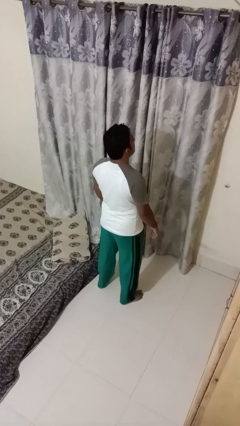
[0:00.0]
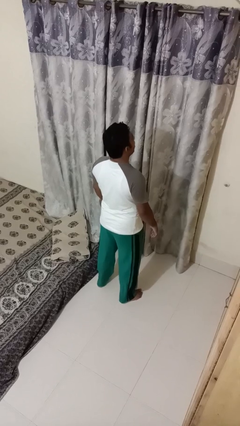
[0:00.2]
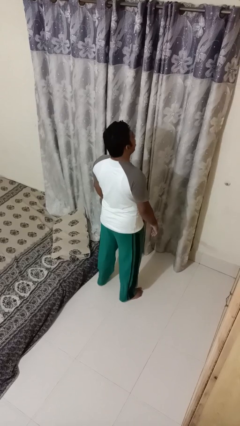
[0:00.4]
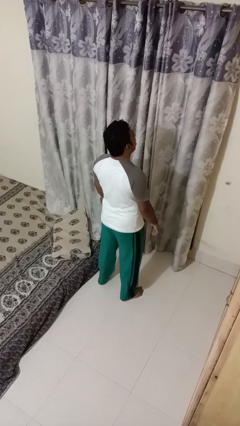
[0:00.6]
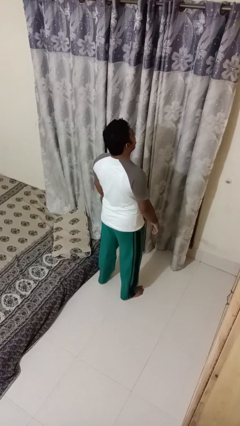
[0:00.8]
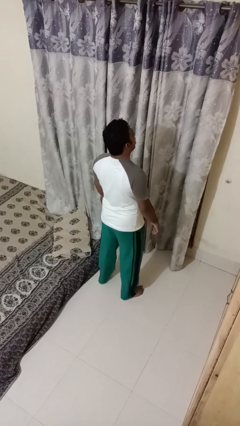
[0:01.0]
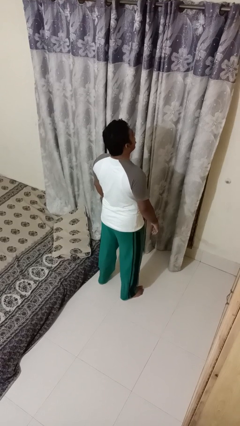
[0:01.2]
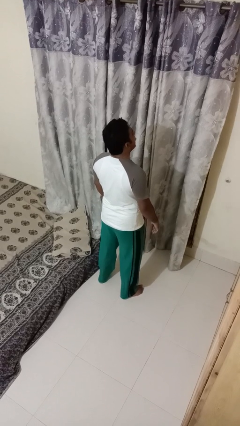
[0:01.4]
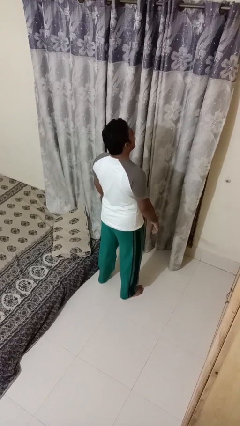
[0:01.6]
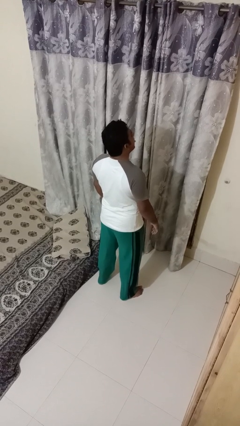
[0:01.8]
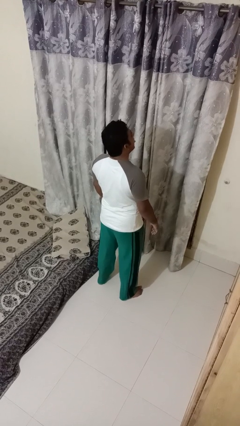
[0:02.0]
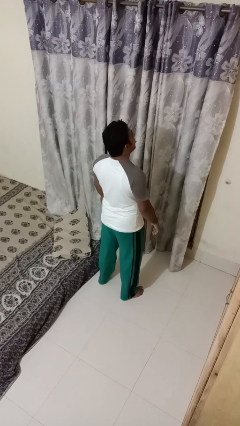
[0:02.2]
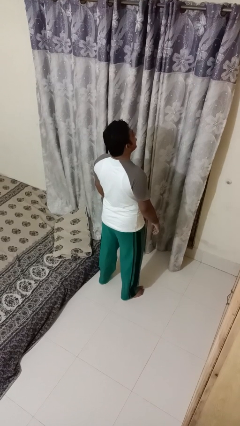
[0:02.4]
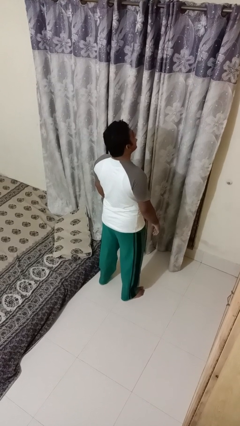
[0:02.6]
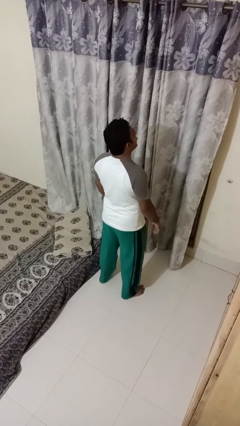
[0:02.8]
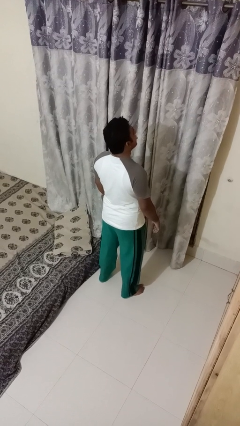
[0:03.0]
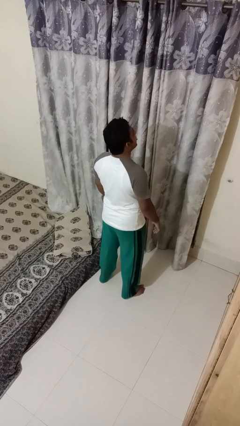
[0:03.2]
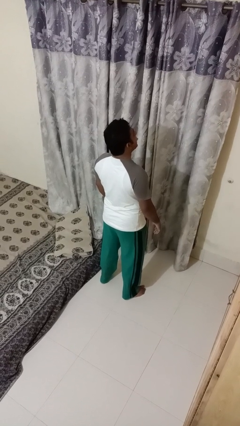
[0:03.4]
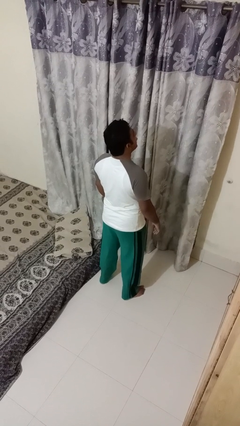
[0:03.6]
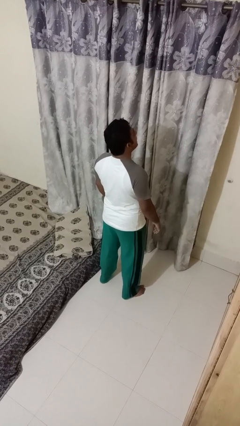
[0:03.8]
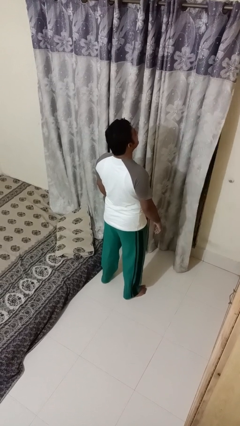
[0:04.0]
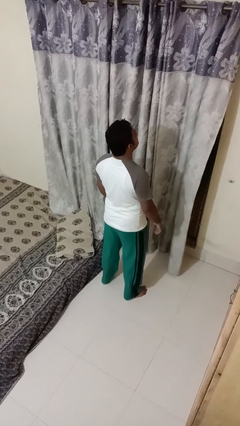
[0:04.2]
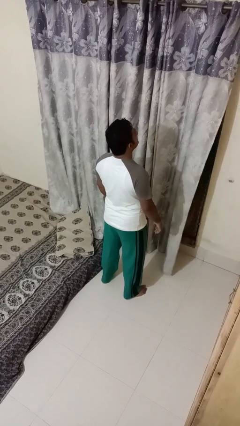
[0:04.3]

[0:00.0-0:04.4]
person sticks out tongue

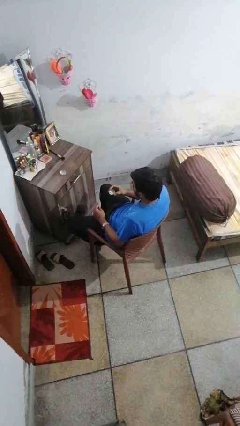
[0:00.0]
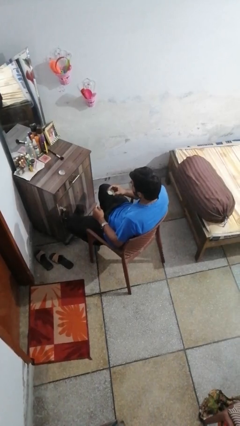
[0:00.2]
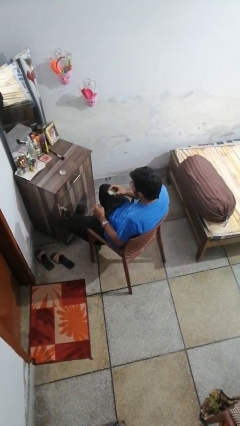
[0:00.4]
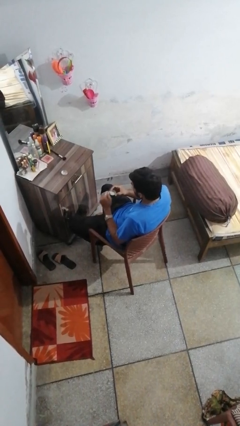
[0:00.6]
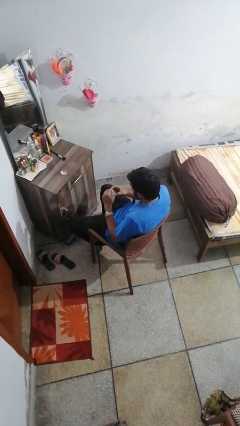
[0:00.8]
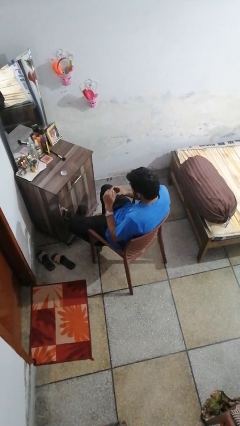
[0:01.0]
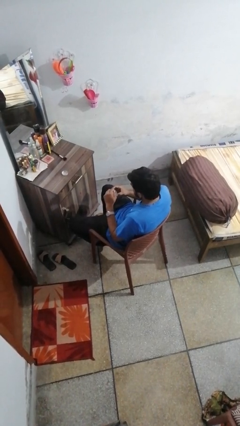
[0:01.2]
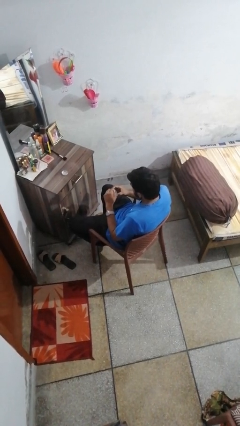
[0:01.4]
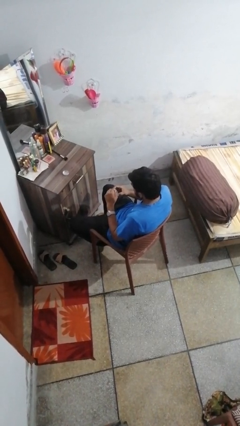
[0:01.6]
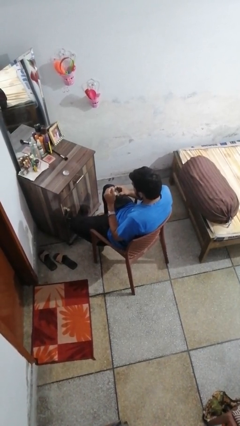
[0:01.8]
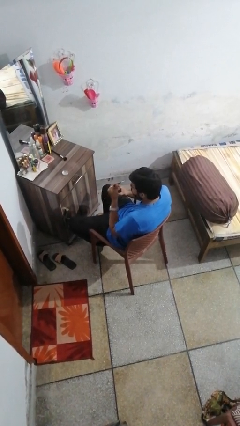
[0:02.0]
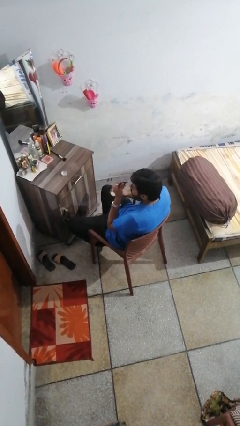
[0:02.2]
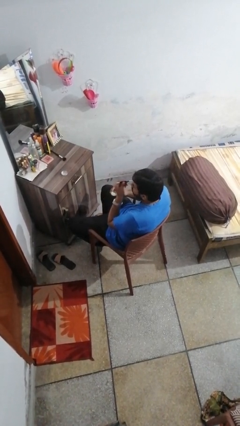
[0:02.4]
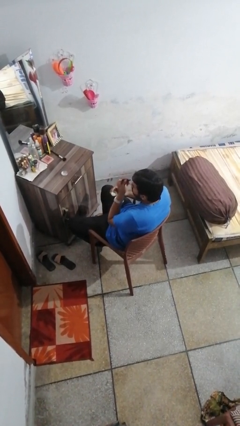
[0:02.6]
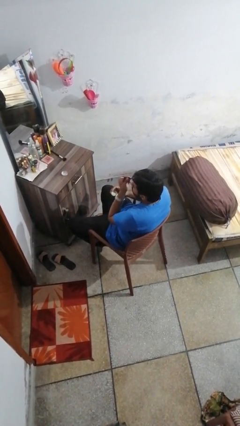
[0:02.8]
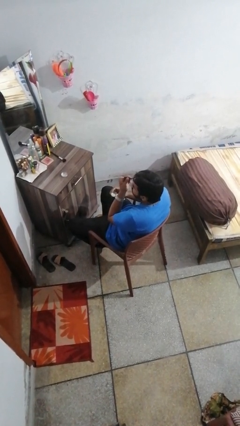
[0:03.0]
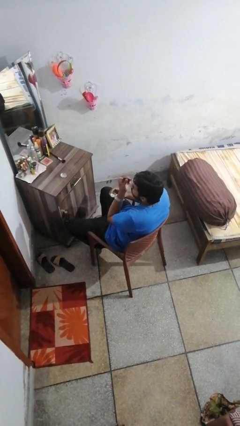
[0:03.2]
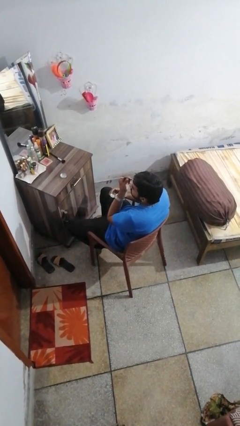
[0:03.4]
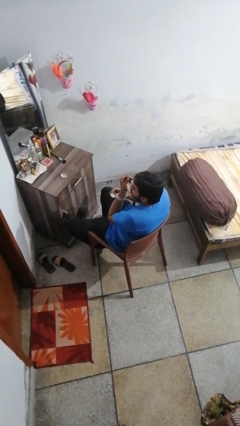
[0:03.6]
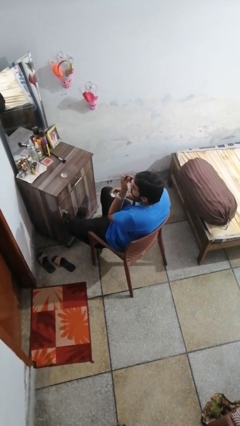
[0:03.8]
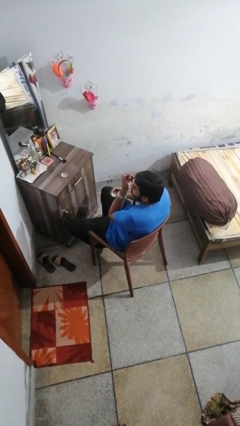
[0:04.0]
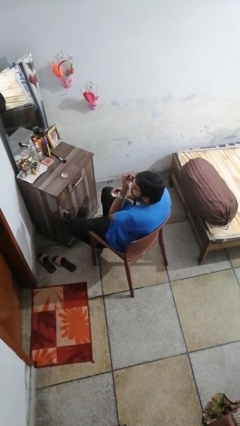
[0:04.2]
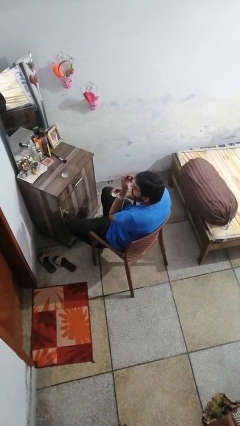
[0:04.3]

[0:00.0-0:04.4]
person applies eye makeup

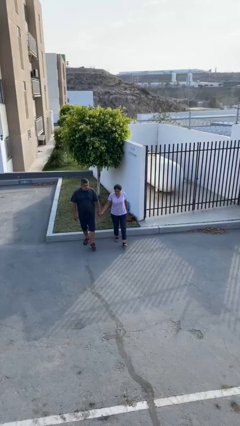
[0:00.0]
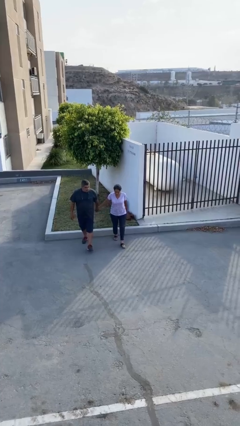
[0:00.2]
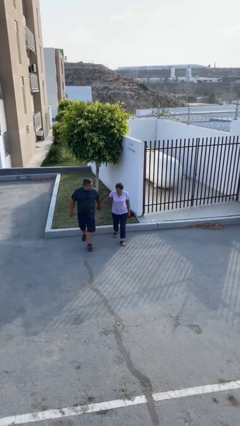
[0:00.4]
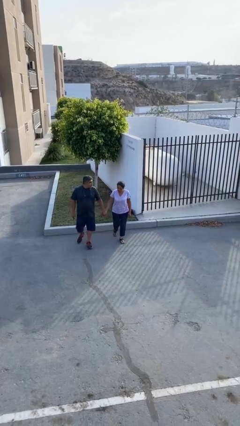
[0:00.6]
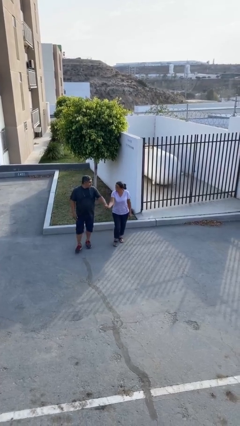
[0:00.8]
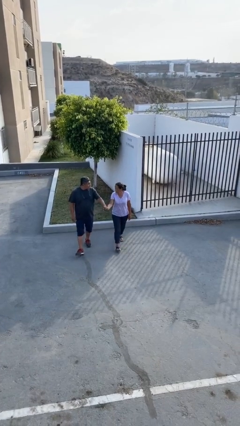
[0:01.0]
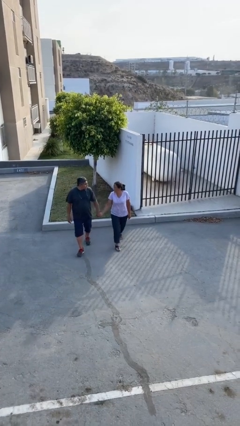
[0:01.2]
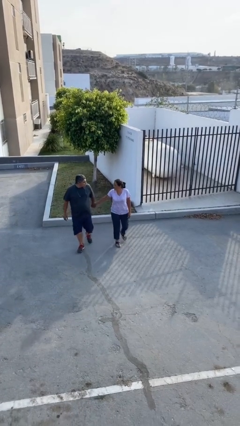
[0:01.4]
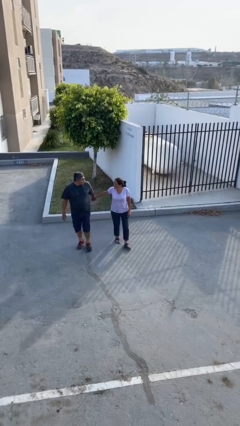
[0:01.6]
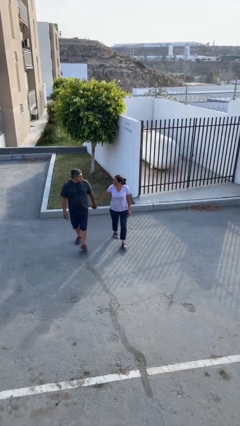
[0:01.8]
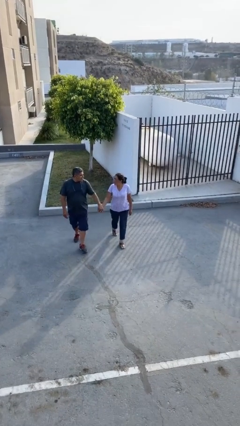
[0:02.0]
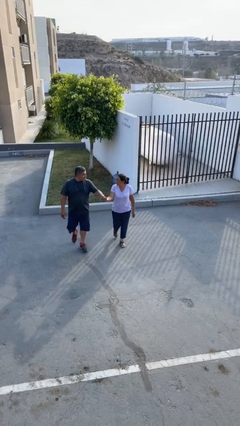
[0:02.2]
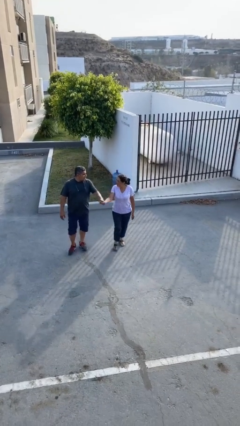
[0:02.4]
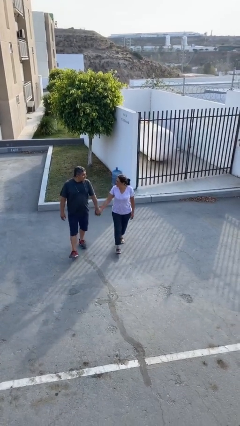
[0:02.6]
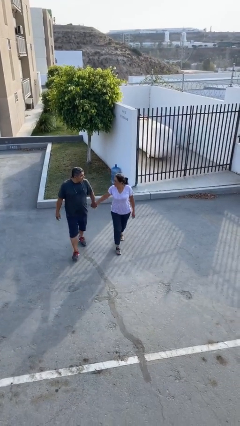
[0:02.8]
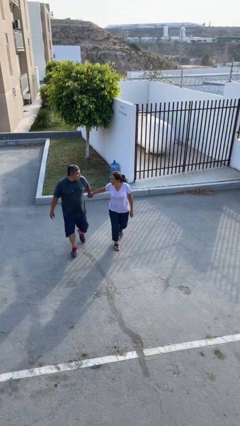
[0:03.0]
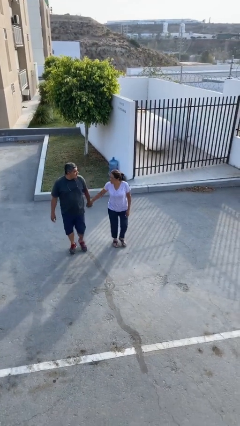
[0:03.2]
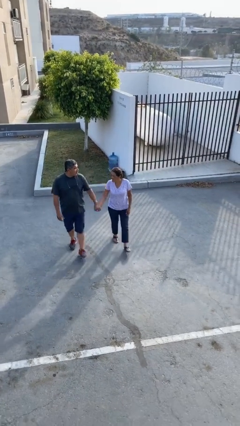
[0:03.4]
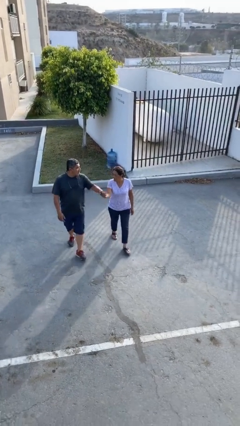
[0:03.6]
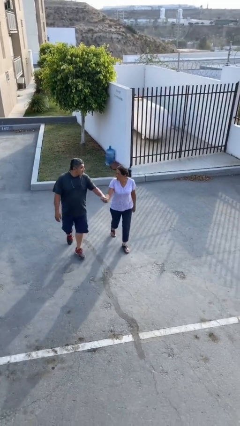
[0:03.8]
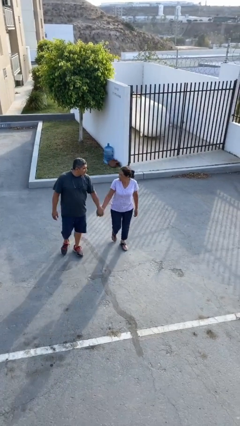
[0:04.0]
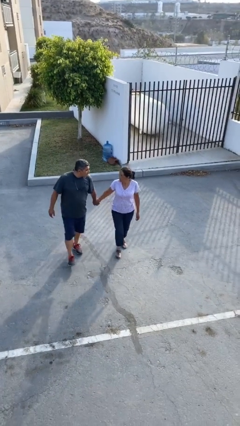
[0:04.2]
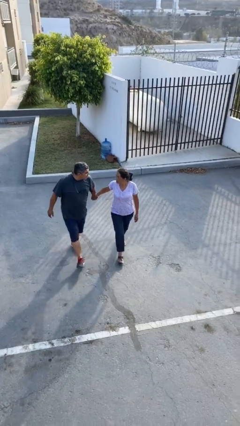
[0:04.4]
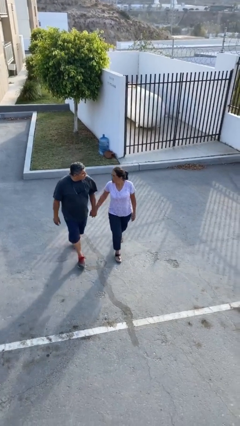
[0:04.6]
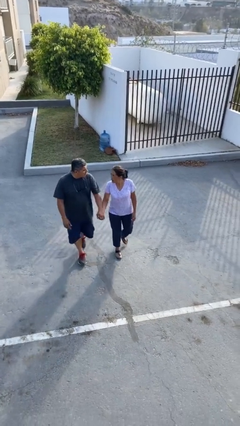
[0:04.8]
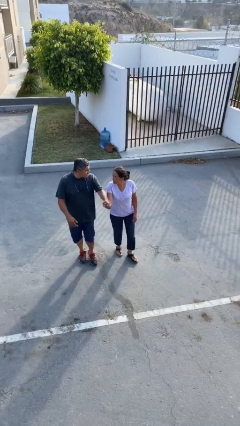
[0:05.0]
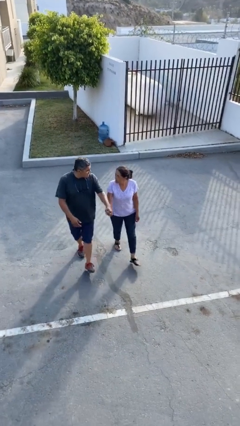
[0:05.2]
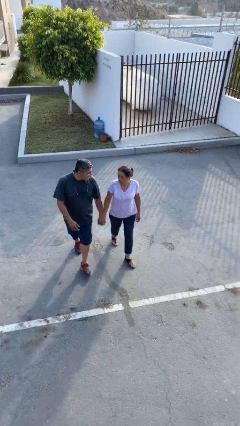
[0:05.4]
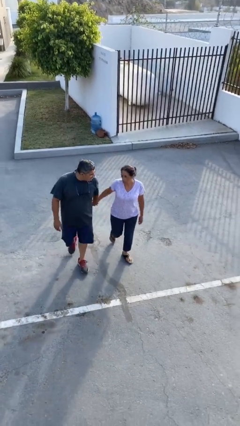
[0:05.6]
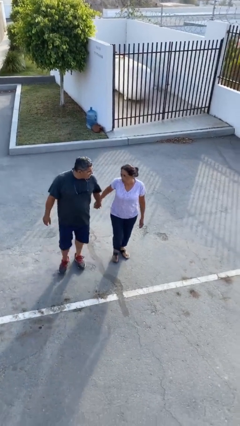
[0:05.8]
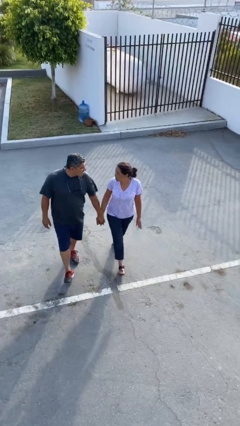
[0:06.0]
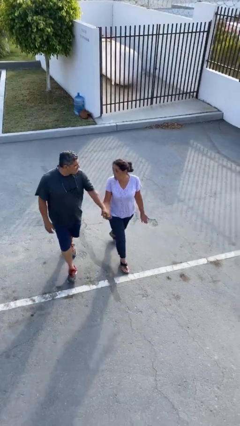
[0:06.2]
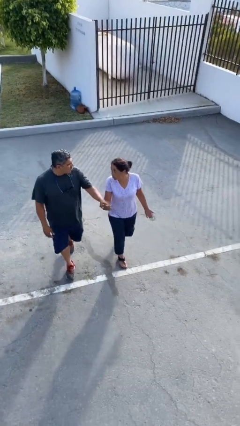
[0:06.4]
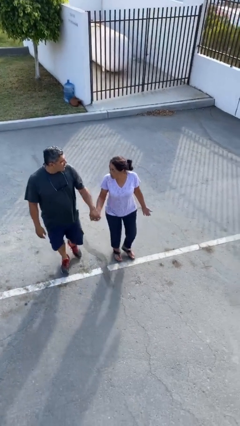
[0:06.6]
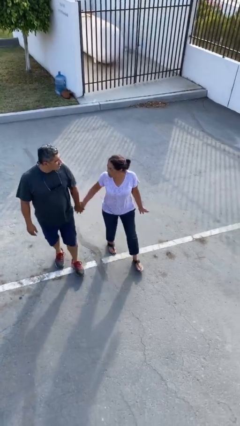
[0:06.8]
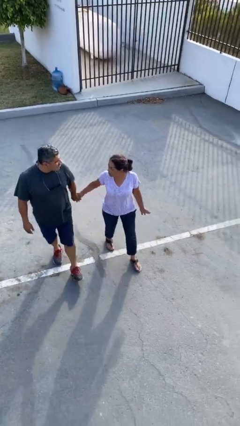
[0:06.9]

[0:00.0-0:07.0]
person holds hand

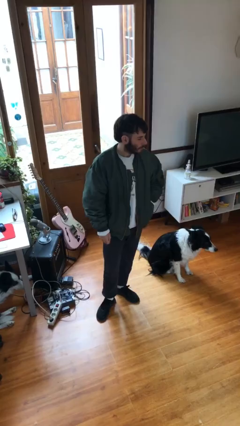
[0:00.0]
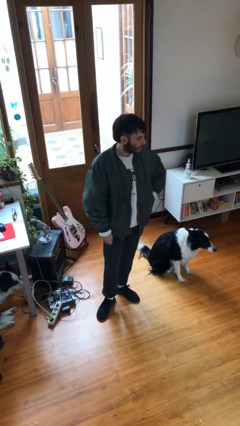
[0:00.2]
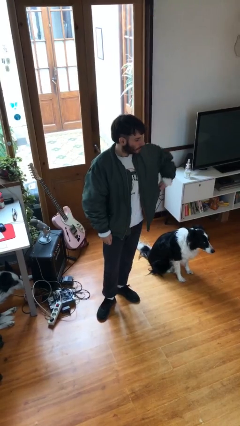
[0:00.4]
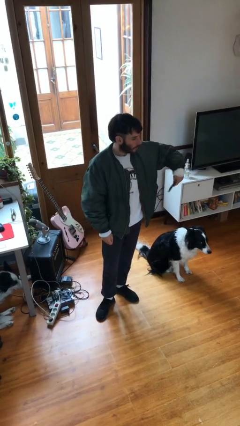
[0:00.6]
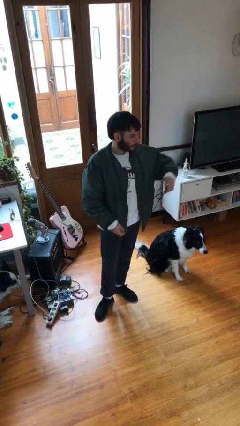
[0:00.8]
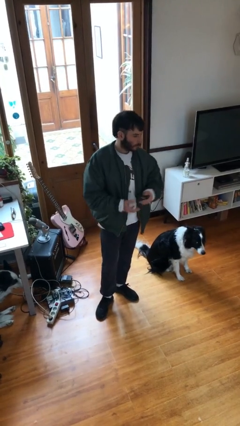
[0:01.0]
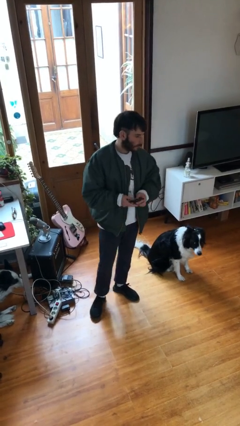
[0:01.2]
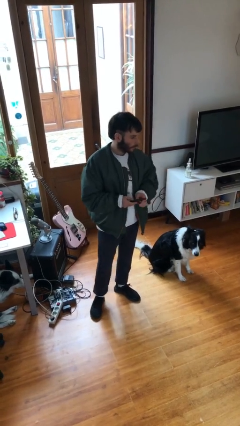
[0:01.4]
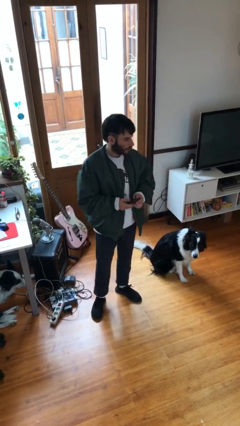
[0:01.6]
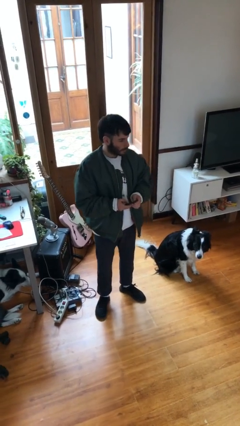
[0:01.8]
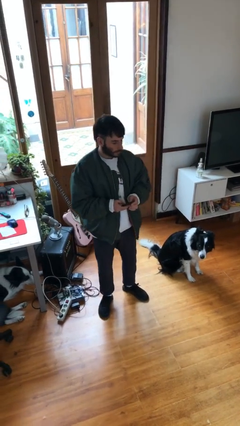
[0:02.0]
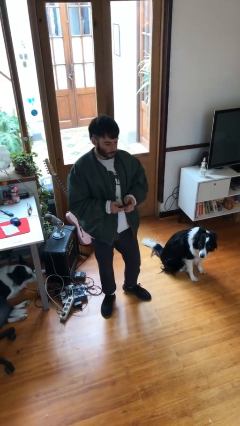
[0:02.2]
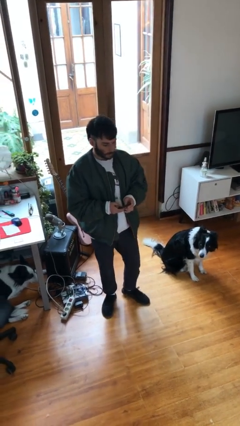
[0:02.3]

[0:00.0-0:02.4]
person takes phone from pocket
